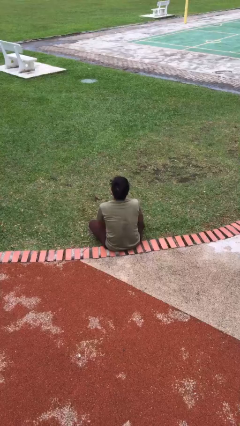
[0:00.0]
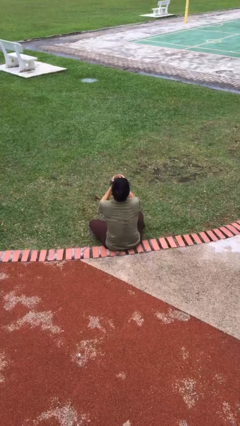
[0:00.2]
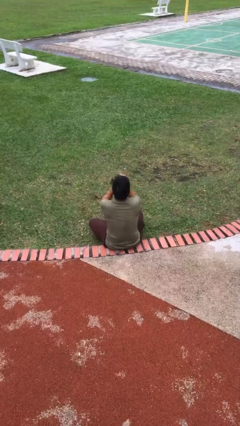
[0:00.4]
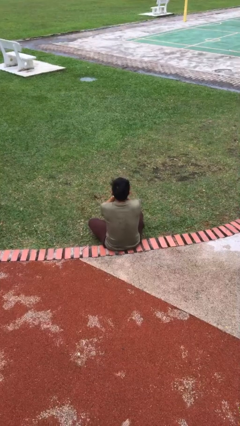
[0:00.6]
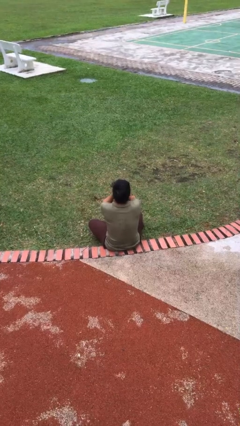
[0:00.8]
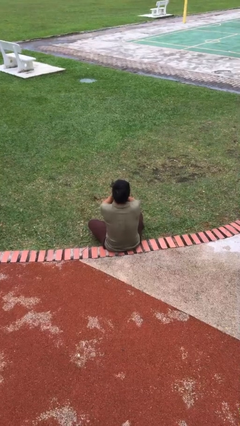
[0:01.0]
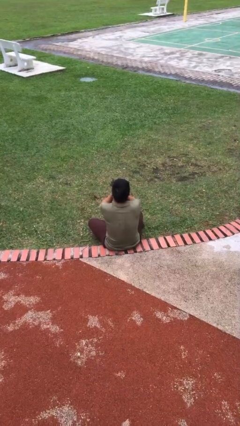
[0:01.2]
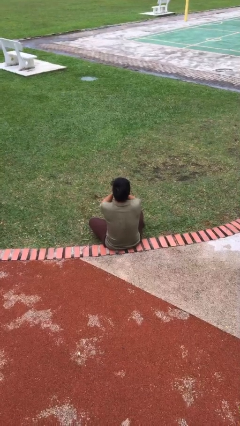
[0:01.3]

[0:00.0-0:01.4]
person sneezes into hand

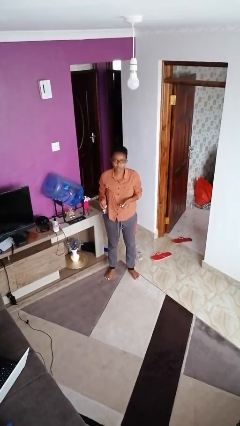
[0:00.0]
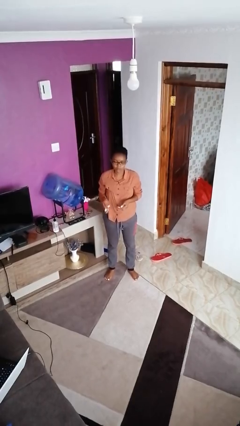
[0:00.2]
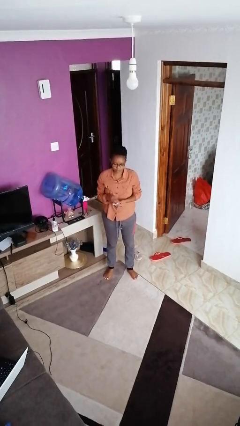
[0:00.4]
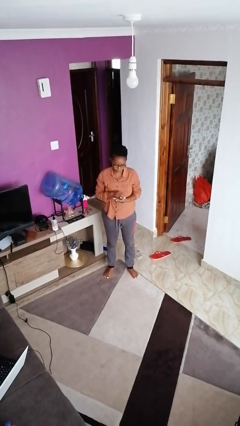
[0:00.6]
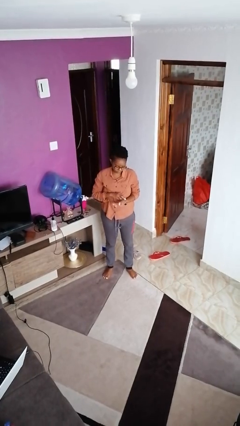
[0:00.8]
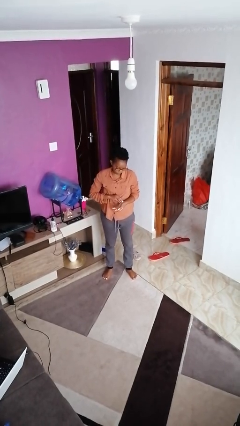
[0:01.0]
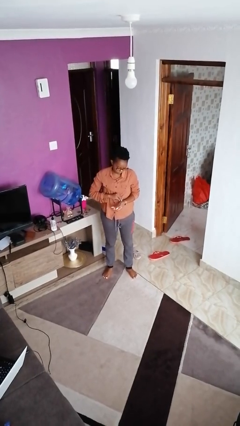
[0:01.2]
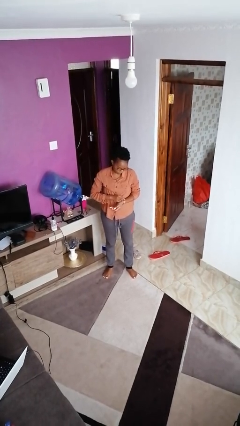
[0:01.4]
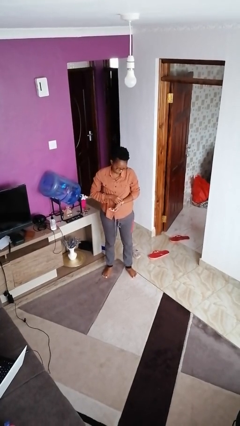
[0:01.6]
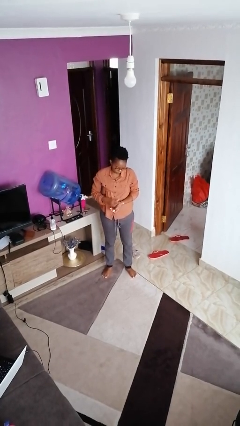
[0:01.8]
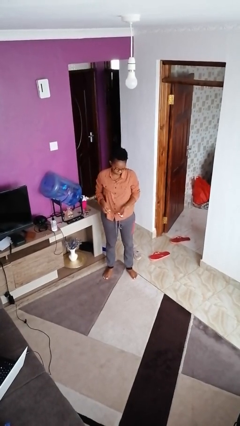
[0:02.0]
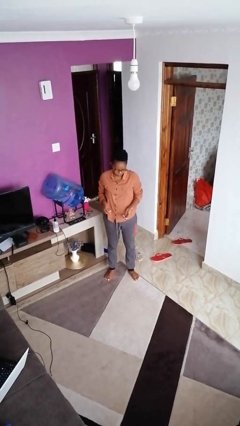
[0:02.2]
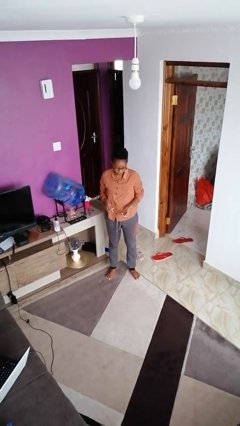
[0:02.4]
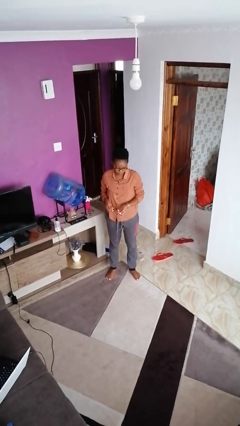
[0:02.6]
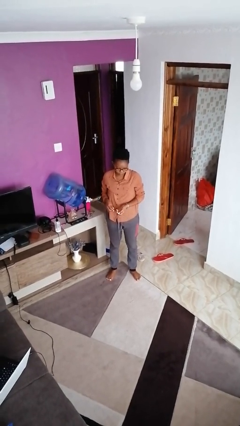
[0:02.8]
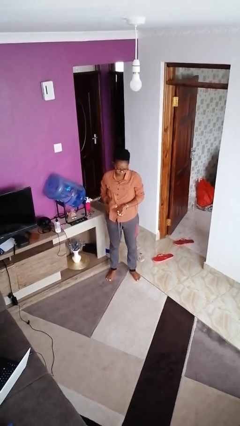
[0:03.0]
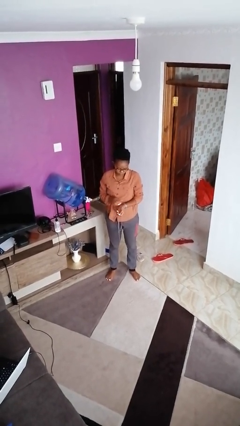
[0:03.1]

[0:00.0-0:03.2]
person puts on wristwatch

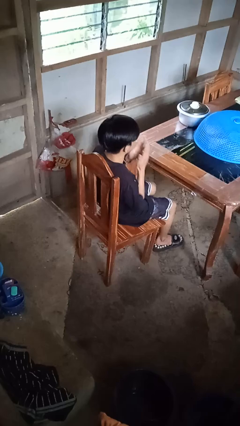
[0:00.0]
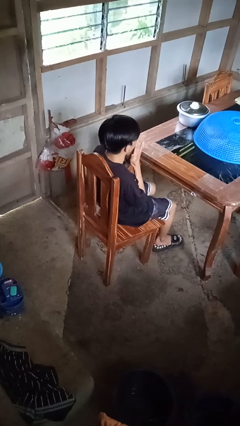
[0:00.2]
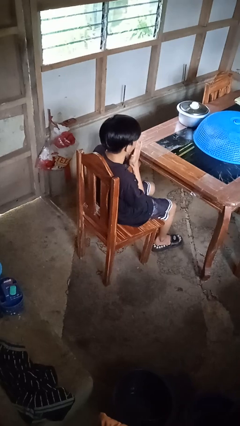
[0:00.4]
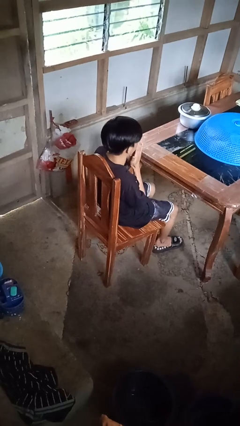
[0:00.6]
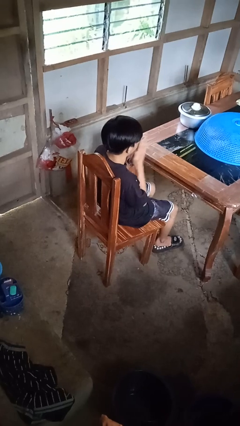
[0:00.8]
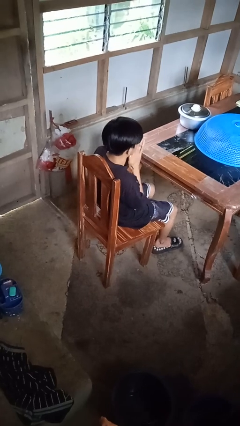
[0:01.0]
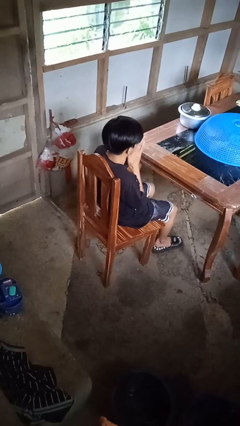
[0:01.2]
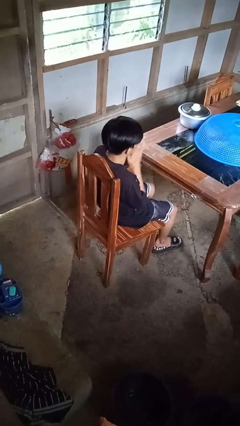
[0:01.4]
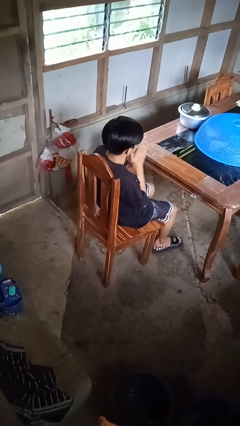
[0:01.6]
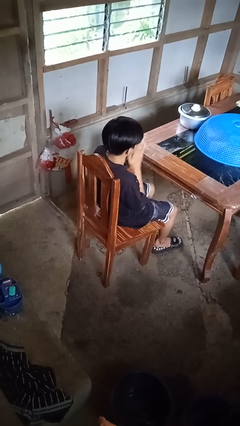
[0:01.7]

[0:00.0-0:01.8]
person blows into hands

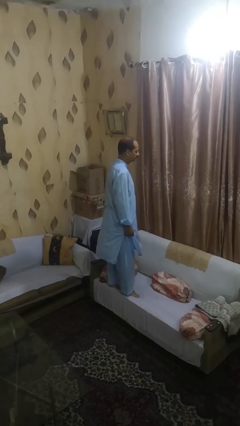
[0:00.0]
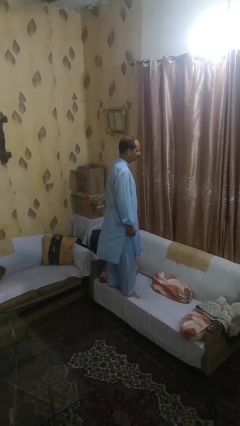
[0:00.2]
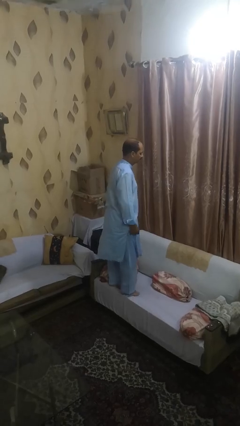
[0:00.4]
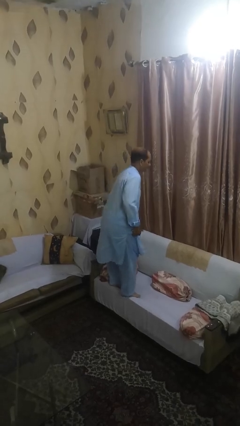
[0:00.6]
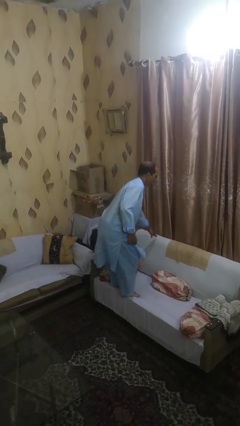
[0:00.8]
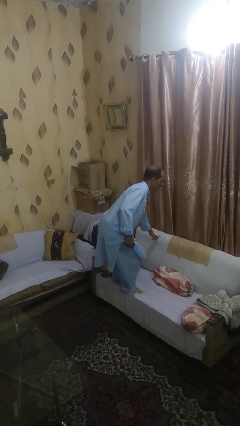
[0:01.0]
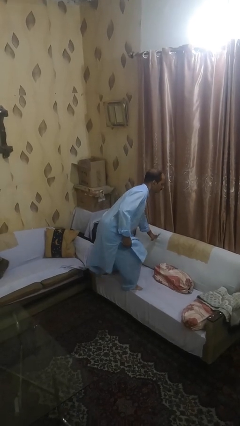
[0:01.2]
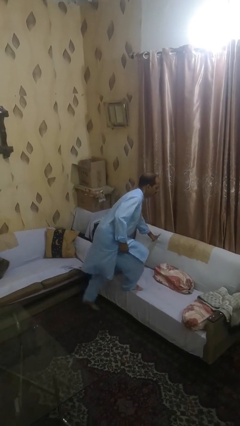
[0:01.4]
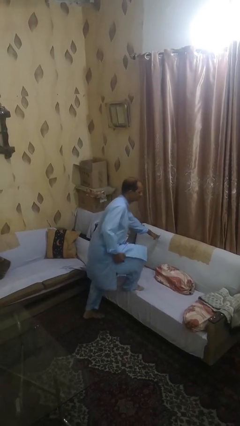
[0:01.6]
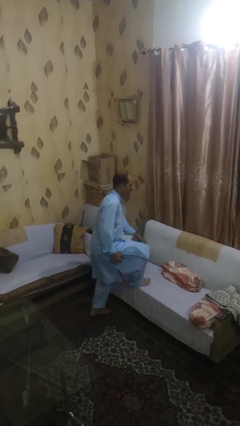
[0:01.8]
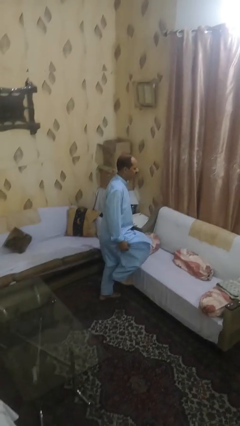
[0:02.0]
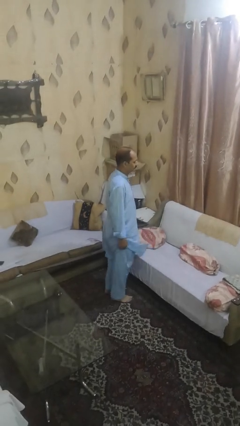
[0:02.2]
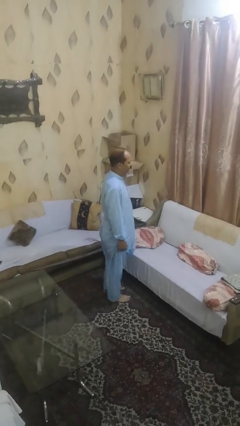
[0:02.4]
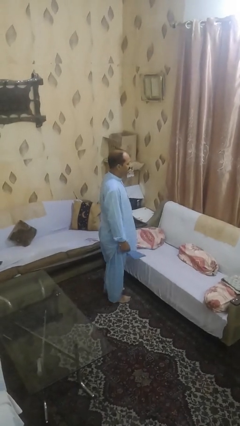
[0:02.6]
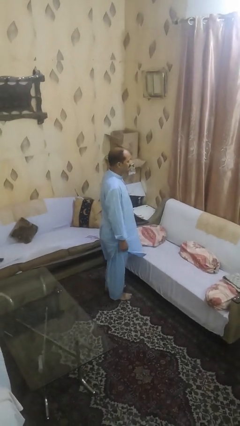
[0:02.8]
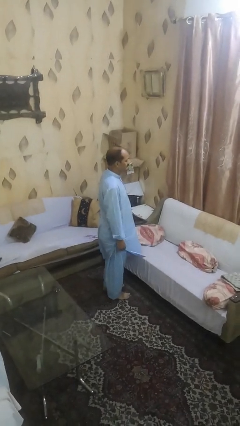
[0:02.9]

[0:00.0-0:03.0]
person climbs off chair

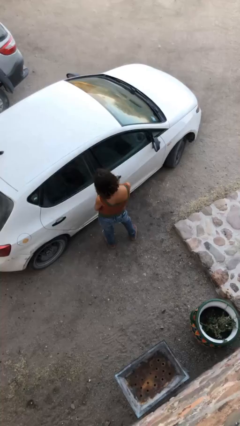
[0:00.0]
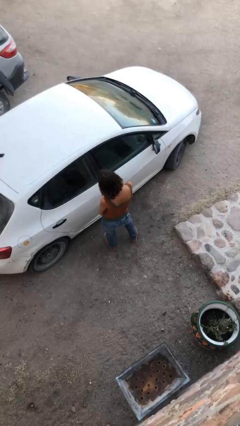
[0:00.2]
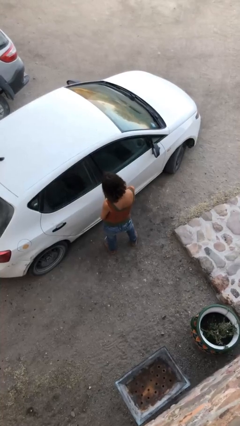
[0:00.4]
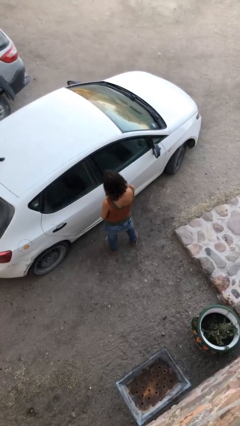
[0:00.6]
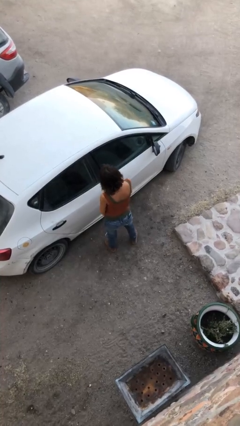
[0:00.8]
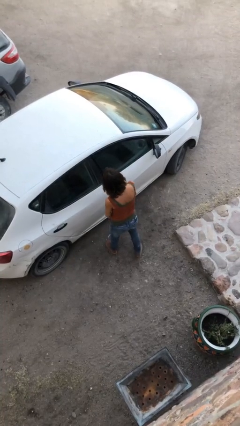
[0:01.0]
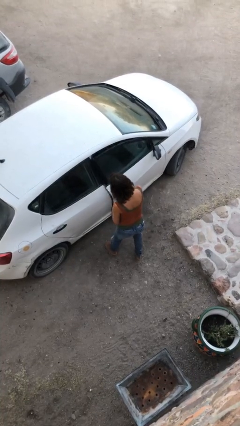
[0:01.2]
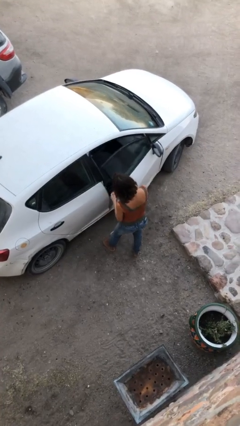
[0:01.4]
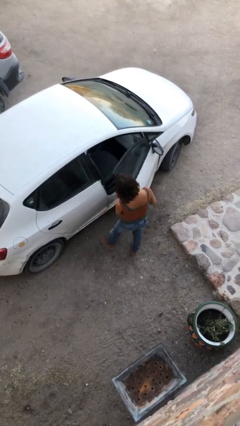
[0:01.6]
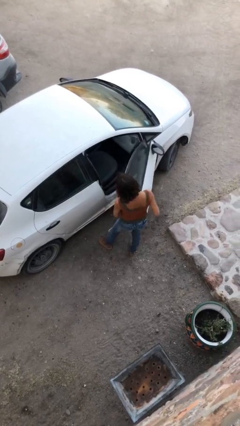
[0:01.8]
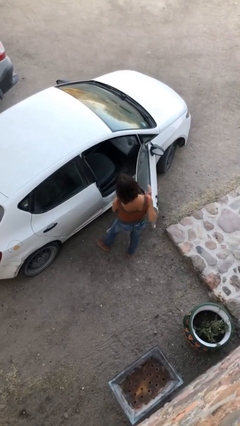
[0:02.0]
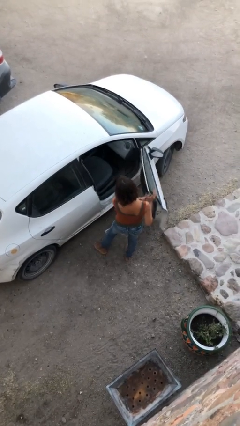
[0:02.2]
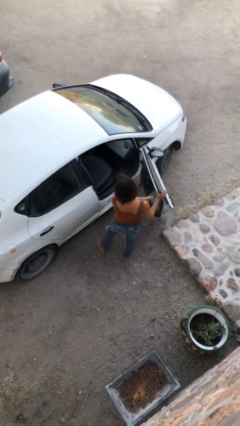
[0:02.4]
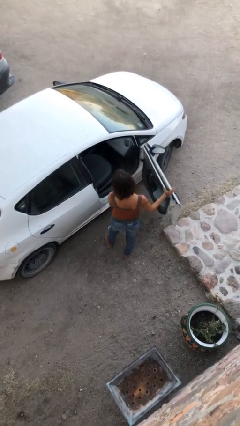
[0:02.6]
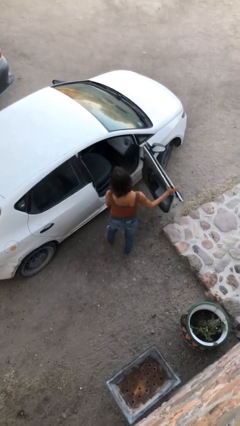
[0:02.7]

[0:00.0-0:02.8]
person opens car door

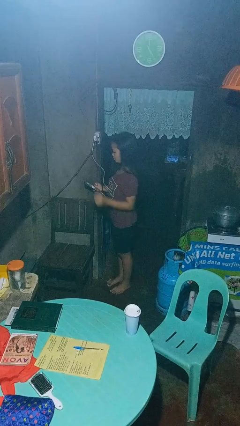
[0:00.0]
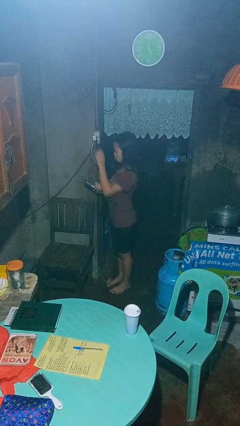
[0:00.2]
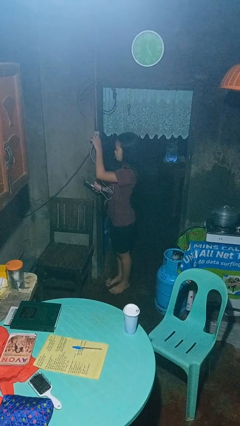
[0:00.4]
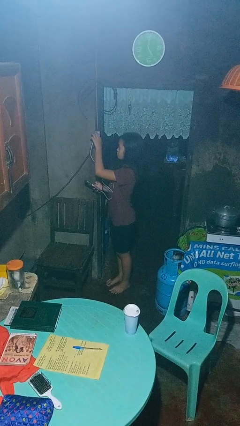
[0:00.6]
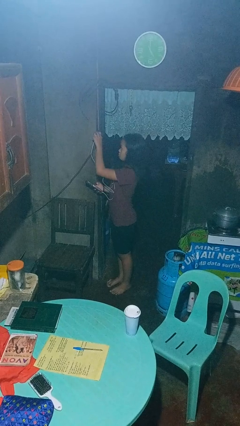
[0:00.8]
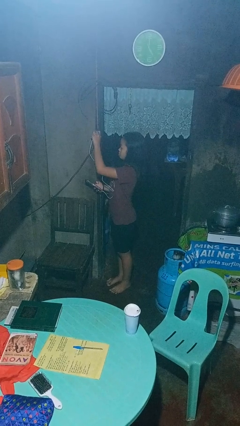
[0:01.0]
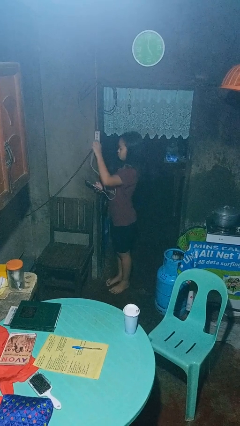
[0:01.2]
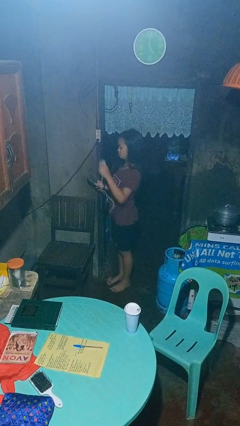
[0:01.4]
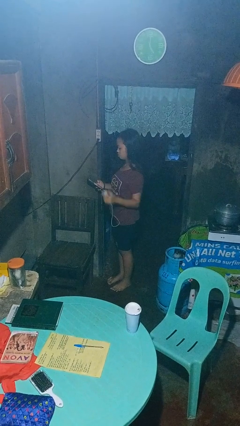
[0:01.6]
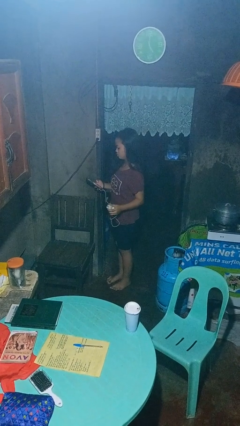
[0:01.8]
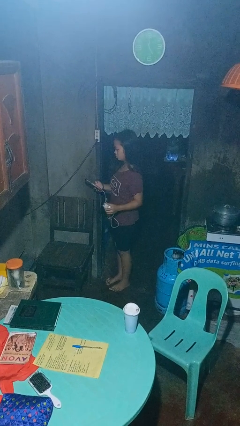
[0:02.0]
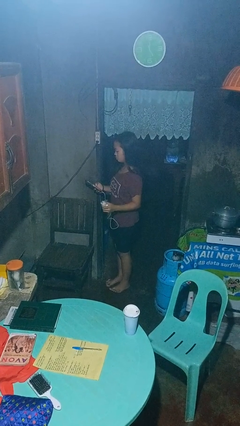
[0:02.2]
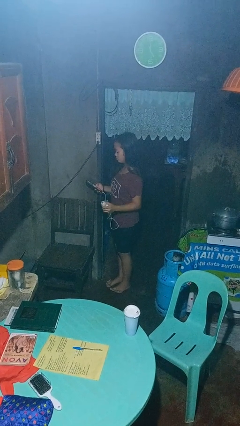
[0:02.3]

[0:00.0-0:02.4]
person unplugs from electrical socket

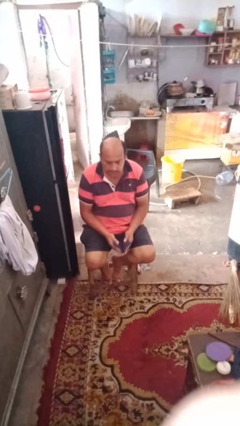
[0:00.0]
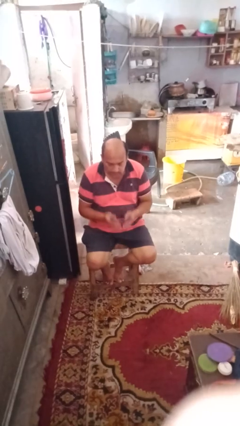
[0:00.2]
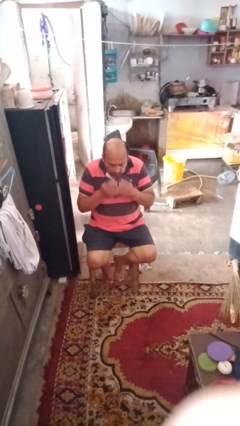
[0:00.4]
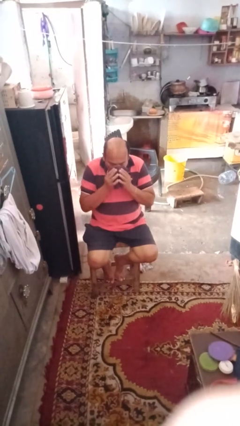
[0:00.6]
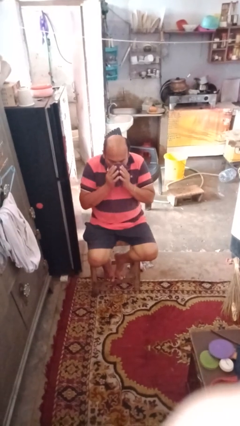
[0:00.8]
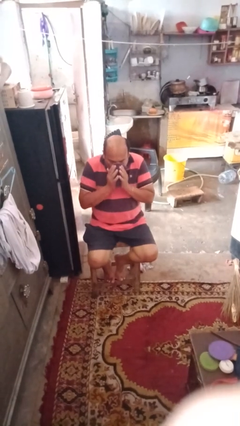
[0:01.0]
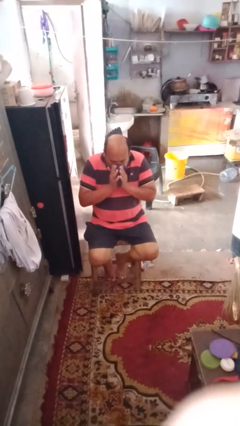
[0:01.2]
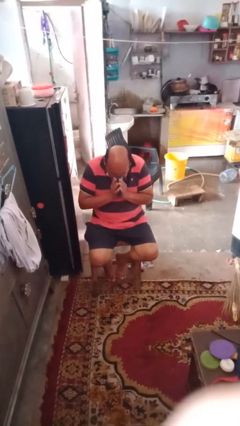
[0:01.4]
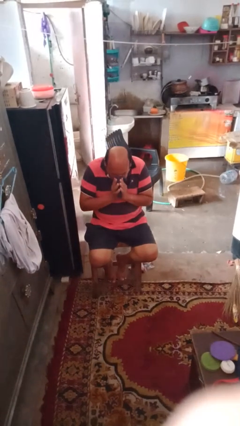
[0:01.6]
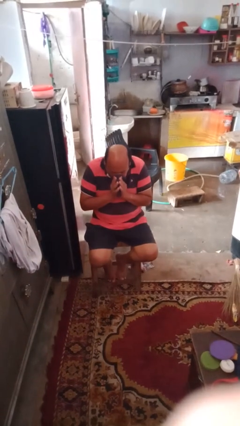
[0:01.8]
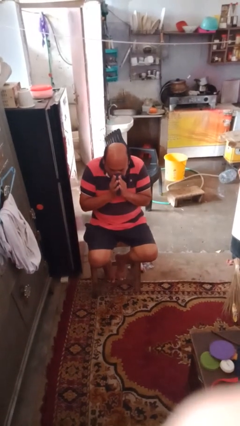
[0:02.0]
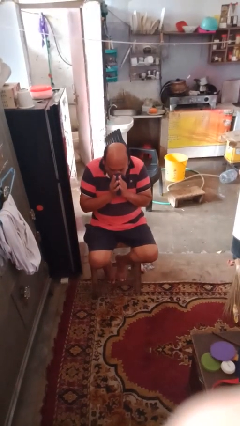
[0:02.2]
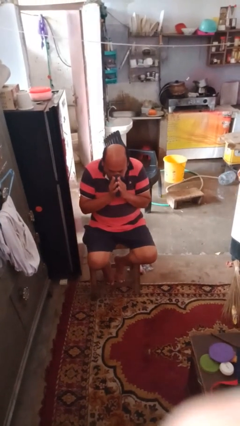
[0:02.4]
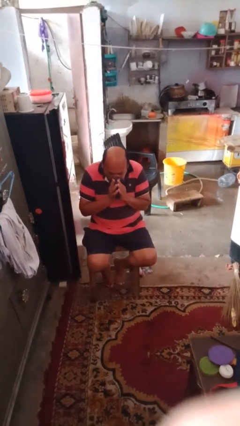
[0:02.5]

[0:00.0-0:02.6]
person blows nose
